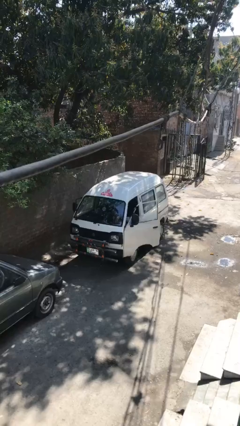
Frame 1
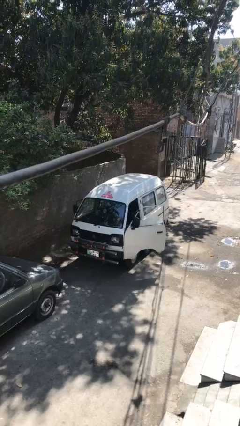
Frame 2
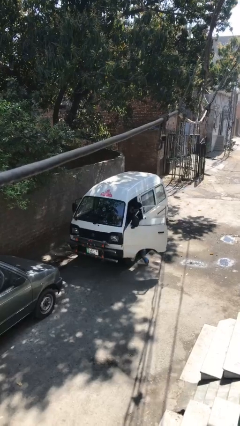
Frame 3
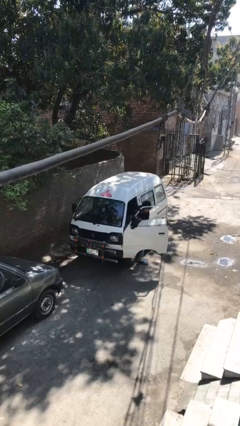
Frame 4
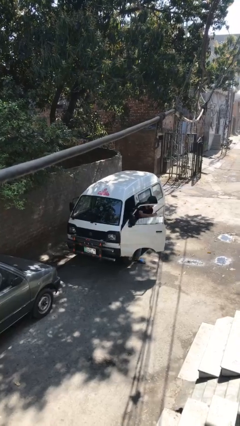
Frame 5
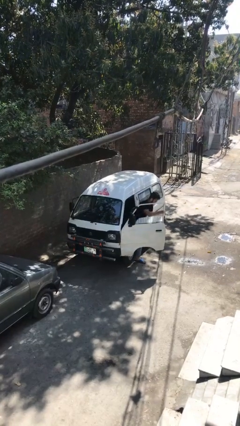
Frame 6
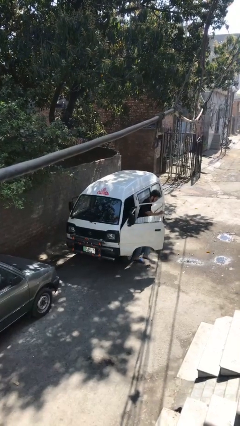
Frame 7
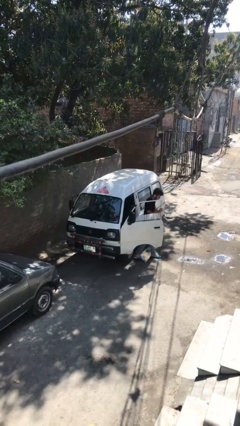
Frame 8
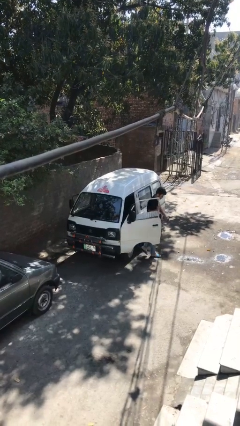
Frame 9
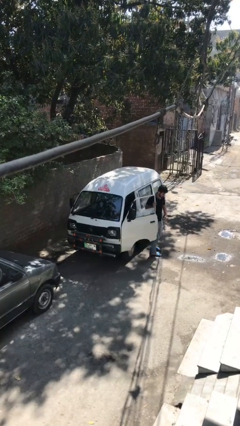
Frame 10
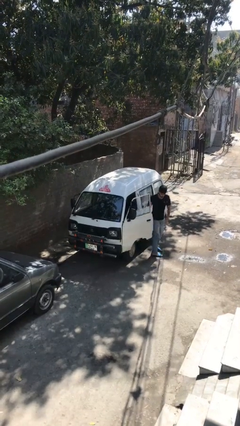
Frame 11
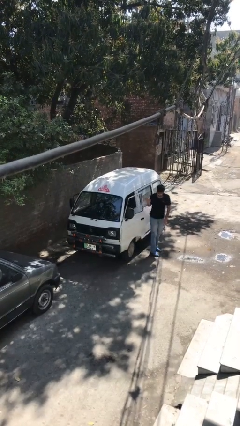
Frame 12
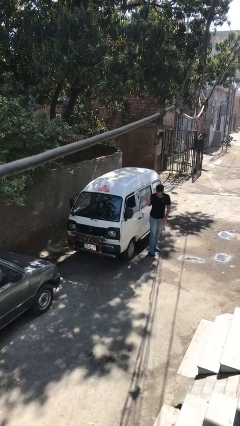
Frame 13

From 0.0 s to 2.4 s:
car drops off person

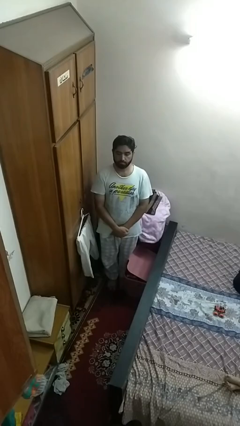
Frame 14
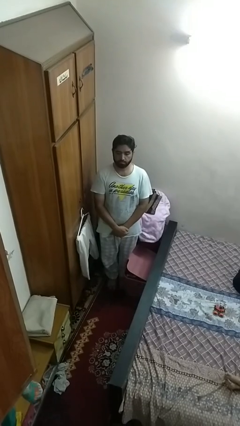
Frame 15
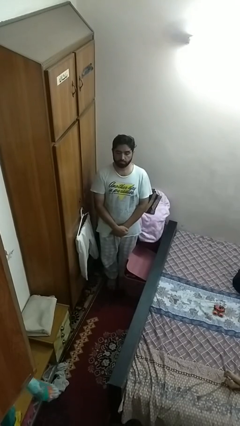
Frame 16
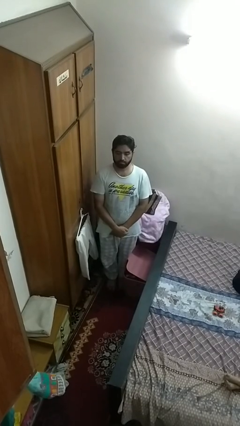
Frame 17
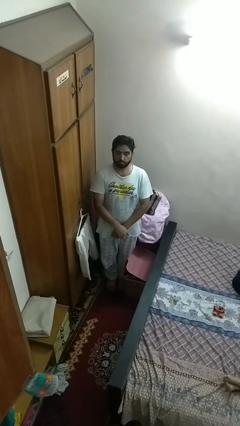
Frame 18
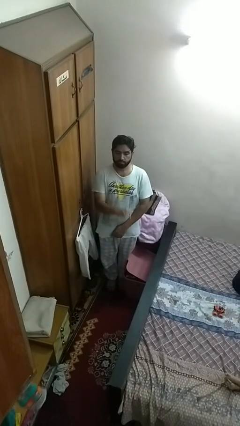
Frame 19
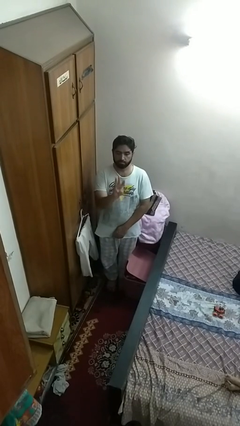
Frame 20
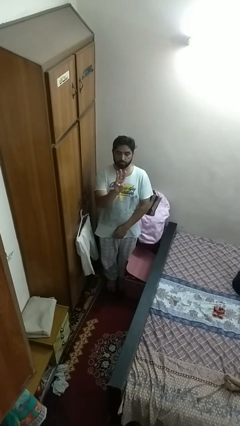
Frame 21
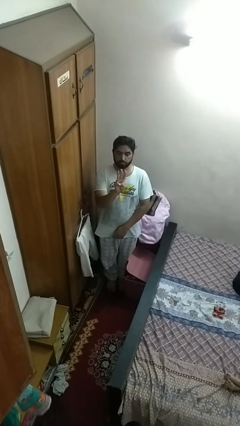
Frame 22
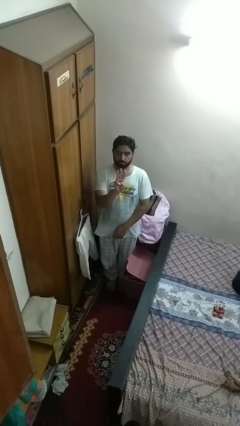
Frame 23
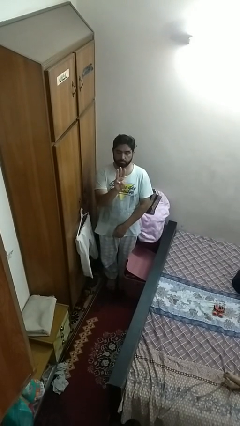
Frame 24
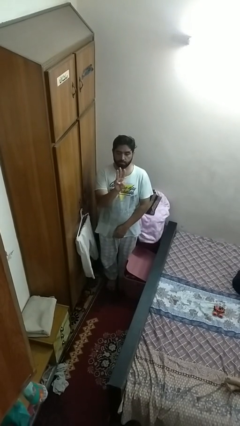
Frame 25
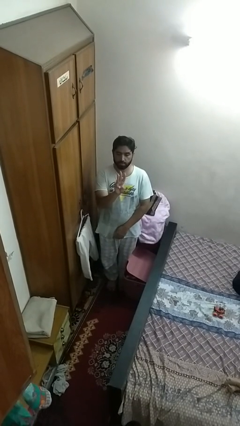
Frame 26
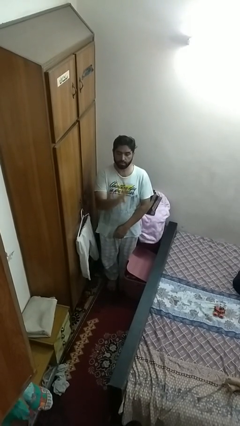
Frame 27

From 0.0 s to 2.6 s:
person gestures number three

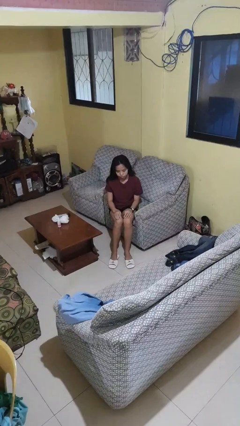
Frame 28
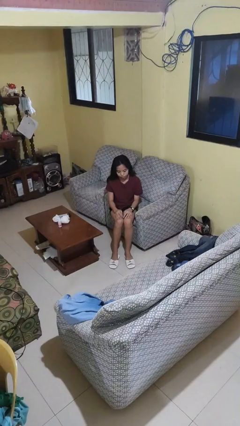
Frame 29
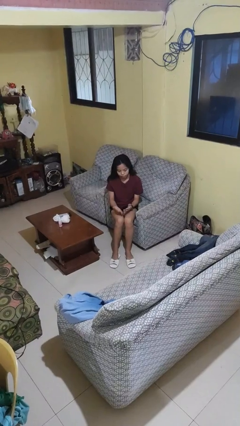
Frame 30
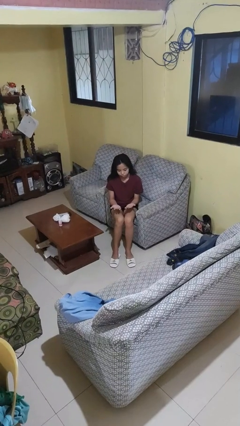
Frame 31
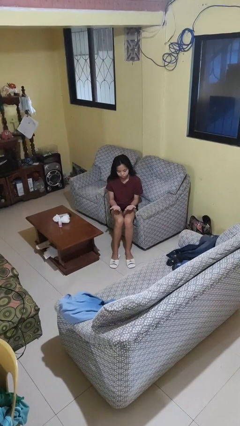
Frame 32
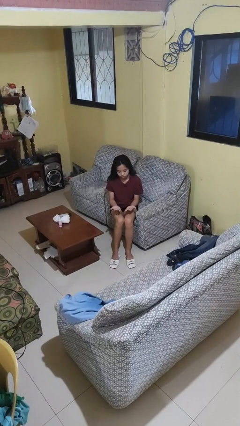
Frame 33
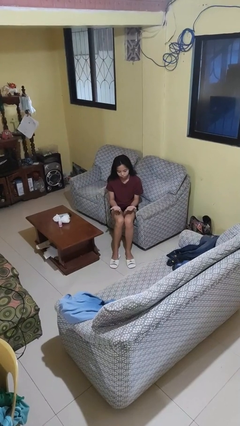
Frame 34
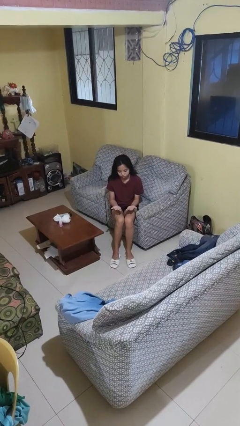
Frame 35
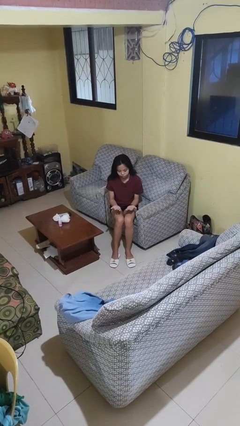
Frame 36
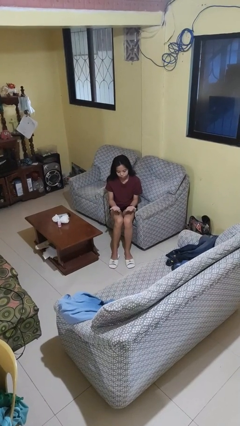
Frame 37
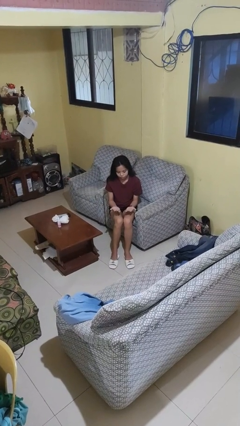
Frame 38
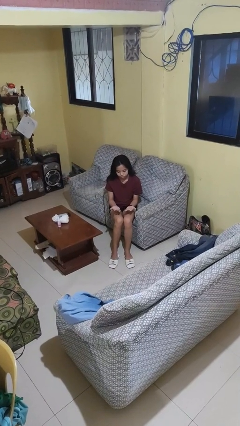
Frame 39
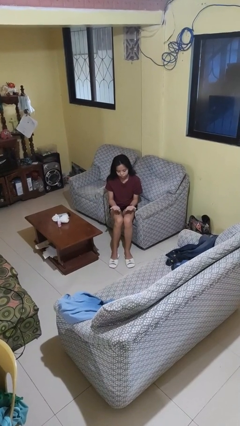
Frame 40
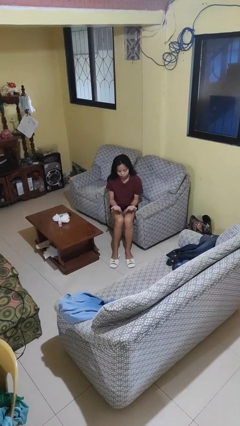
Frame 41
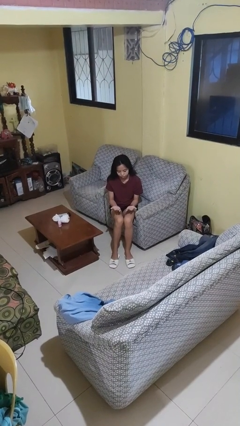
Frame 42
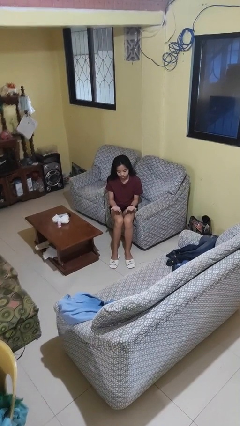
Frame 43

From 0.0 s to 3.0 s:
person looks at hands in lap

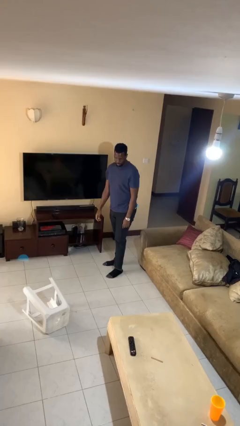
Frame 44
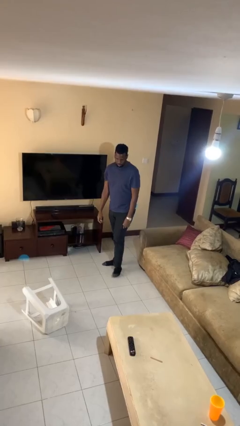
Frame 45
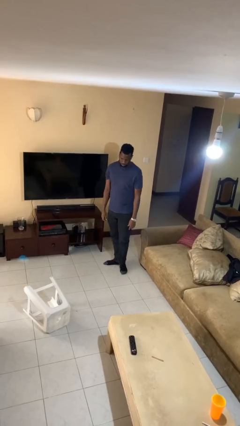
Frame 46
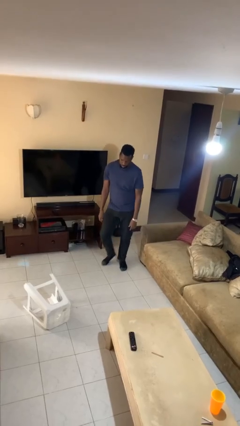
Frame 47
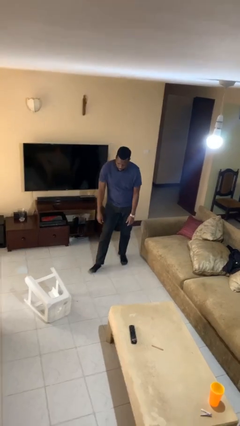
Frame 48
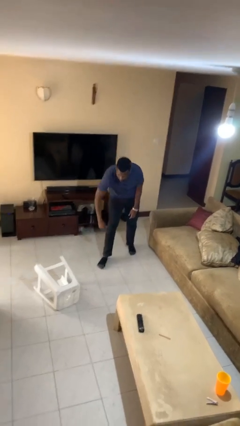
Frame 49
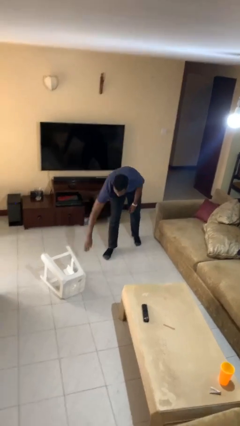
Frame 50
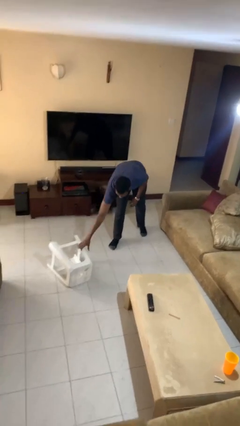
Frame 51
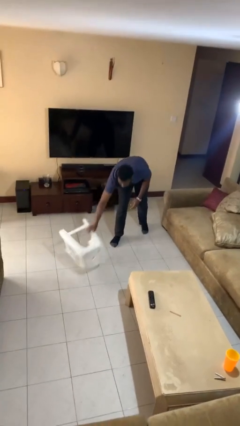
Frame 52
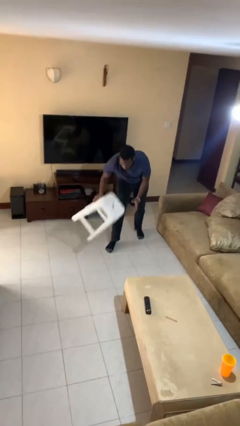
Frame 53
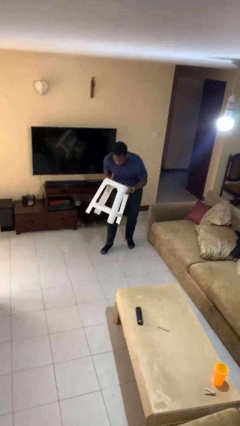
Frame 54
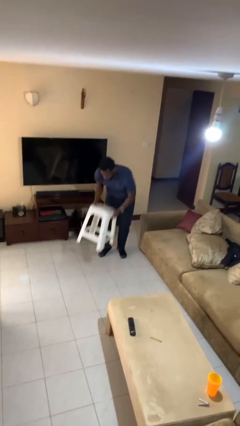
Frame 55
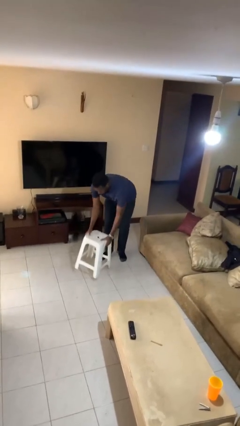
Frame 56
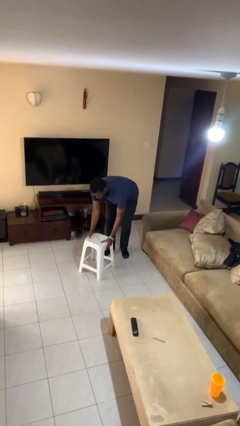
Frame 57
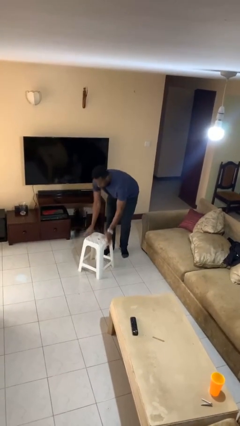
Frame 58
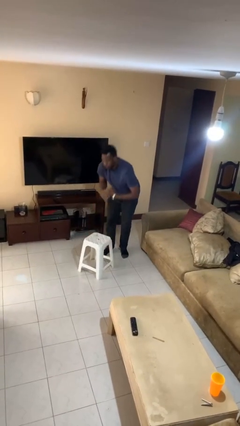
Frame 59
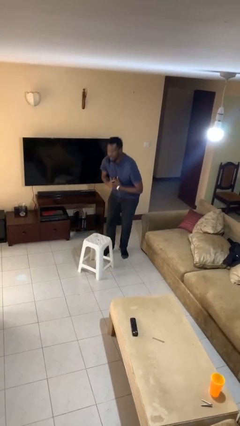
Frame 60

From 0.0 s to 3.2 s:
person sets upright furniture

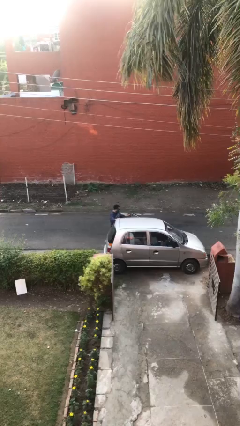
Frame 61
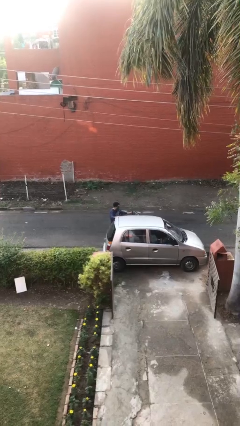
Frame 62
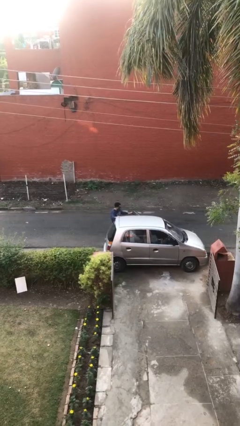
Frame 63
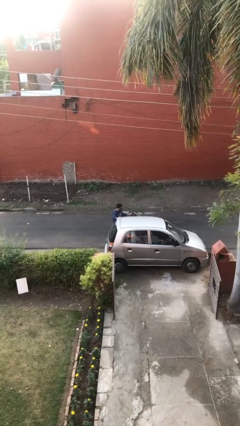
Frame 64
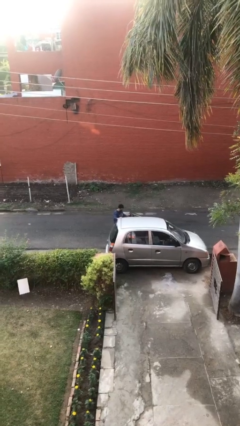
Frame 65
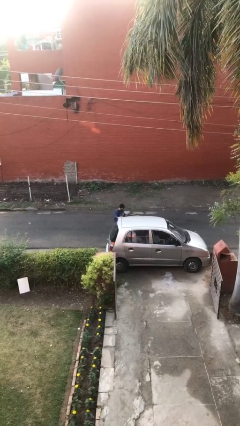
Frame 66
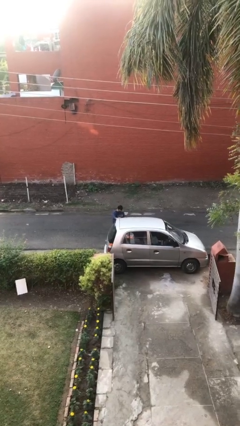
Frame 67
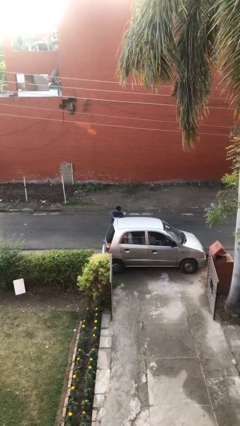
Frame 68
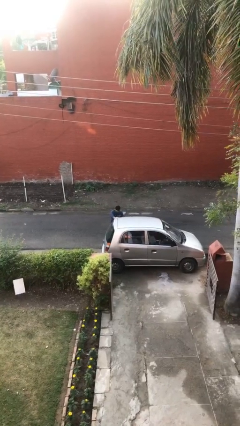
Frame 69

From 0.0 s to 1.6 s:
person closes car door

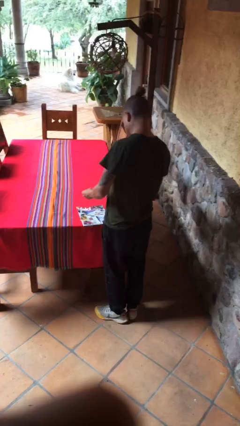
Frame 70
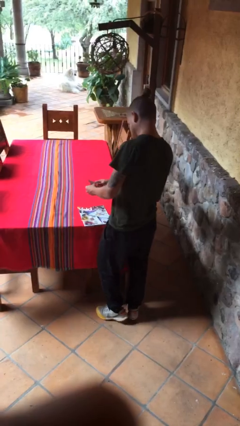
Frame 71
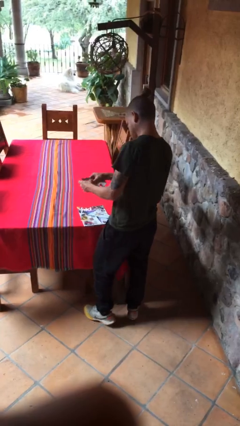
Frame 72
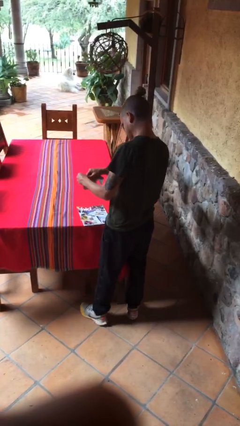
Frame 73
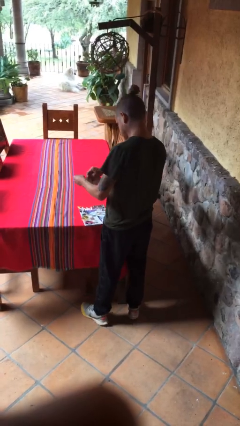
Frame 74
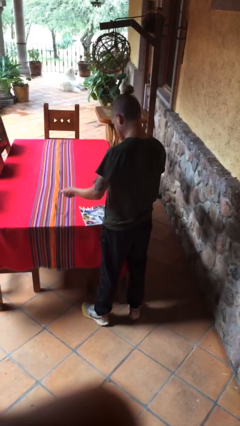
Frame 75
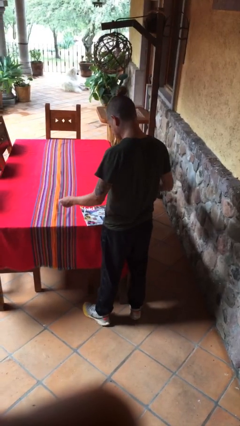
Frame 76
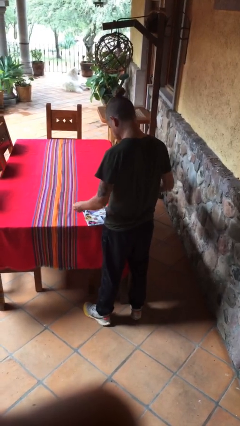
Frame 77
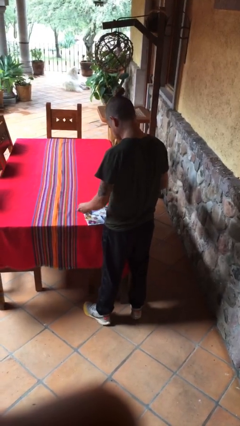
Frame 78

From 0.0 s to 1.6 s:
person tears paper

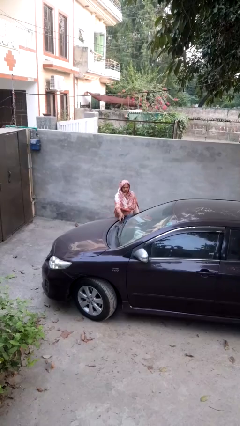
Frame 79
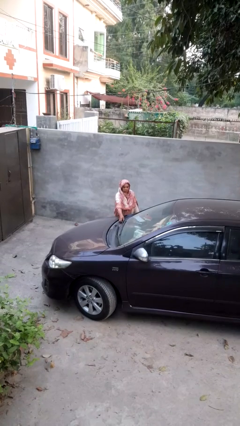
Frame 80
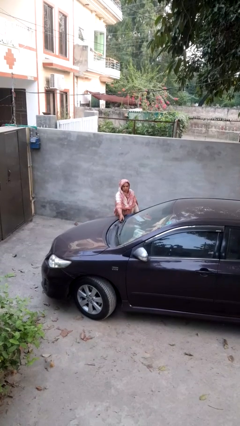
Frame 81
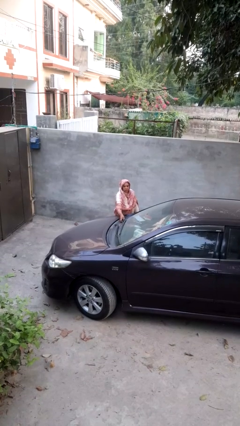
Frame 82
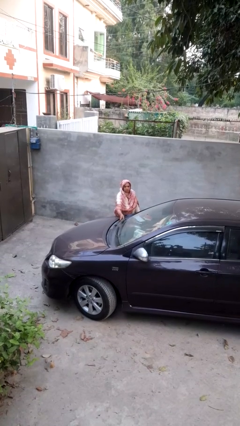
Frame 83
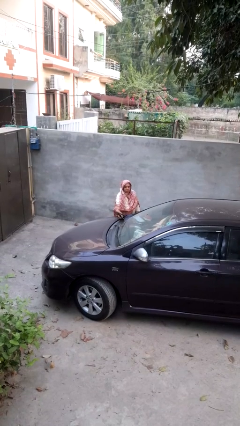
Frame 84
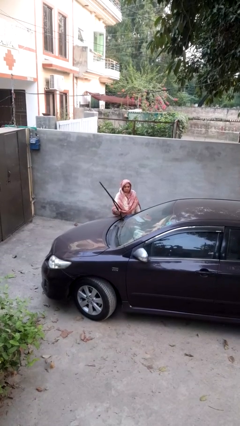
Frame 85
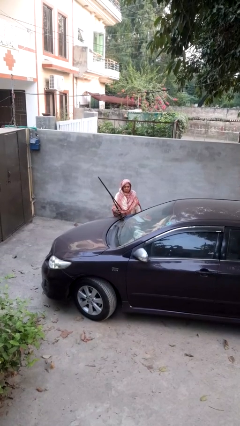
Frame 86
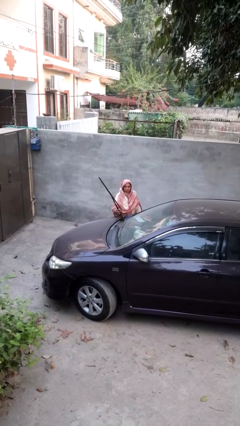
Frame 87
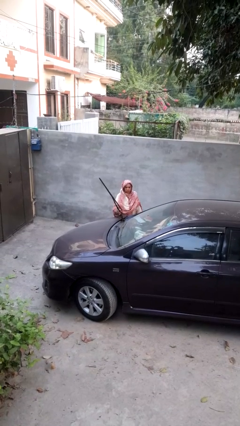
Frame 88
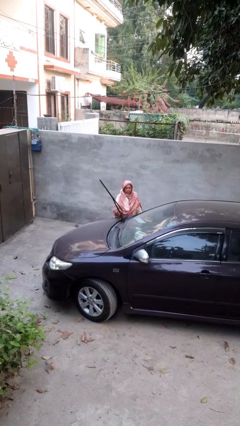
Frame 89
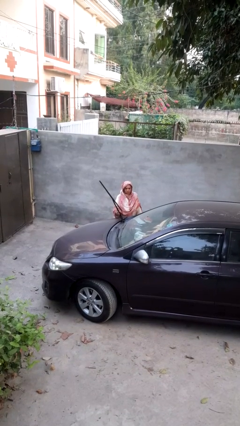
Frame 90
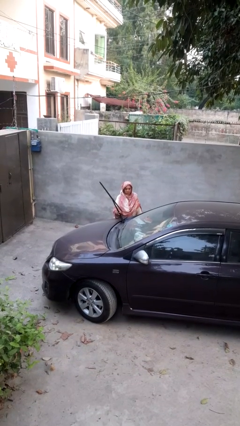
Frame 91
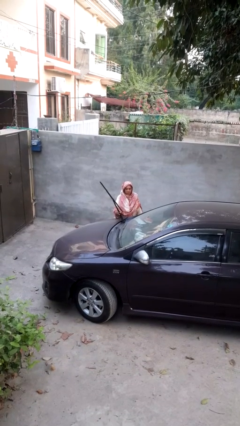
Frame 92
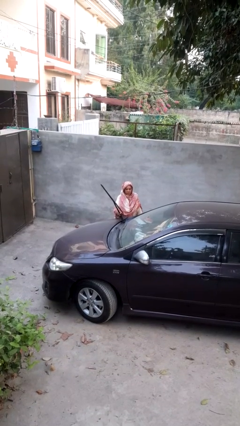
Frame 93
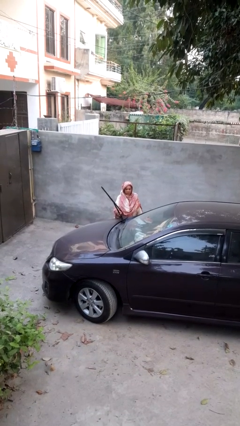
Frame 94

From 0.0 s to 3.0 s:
person flips up car wipers
